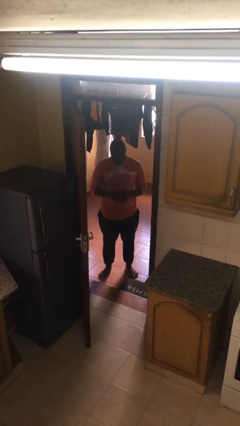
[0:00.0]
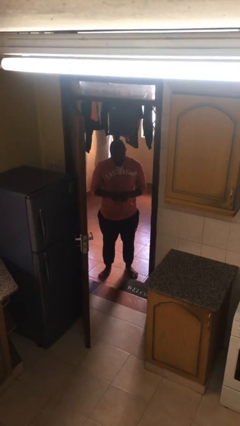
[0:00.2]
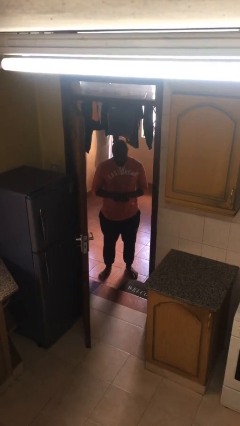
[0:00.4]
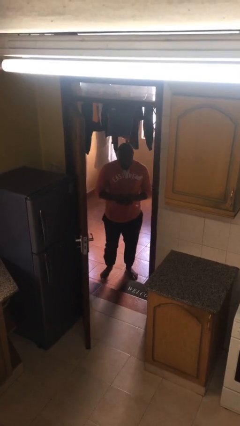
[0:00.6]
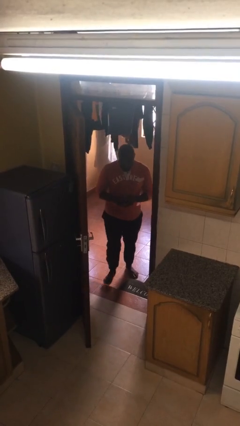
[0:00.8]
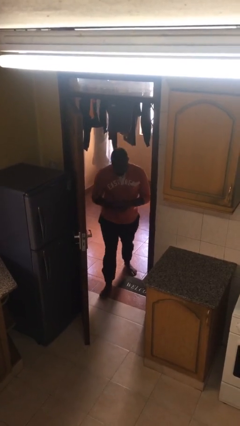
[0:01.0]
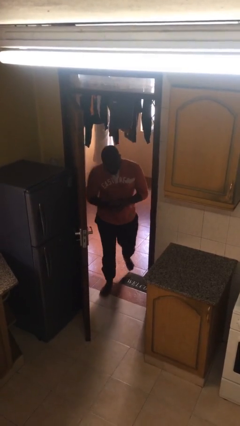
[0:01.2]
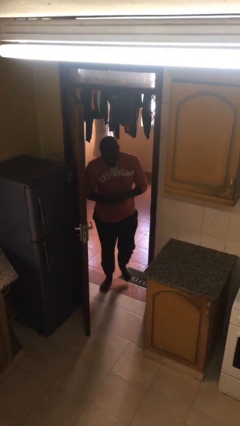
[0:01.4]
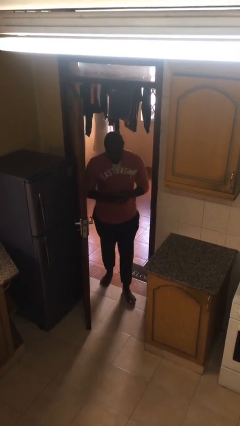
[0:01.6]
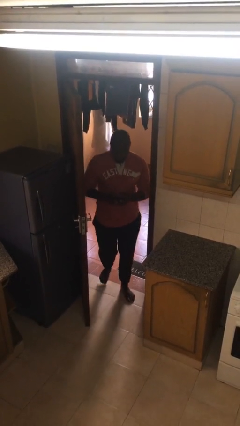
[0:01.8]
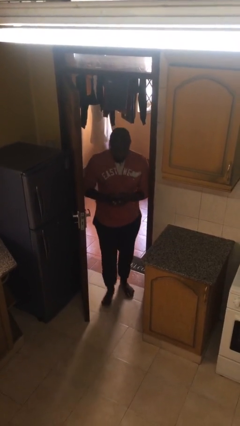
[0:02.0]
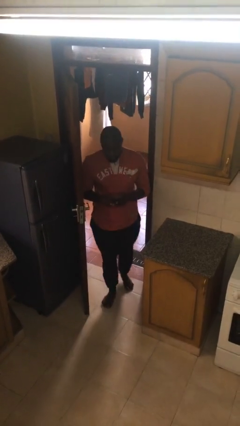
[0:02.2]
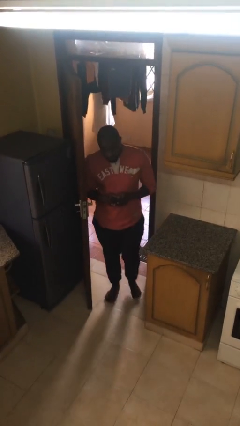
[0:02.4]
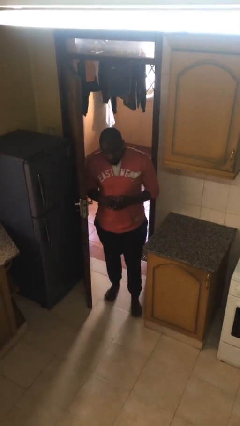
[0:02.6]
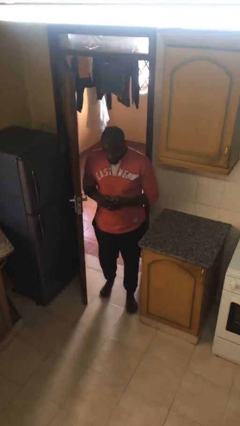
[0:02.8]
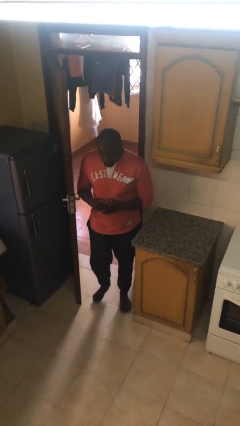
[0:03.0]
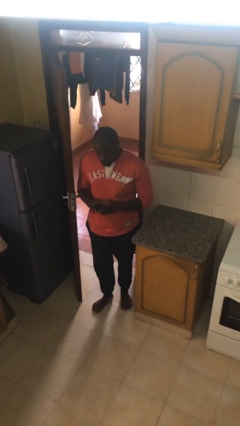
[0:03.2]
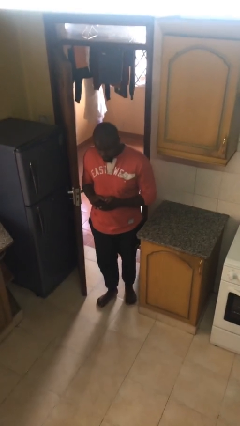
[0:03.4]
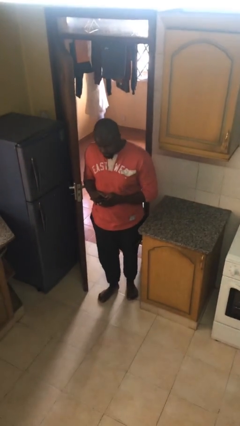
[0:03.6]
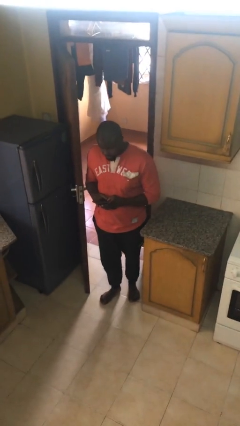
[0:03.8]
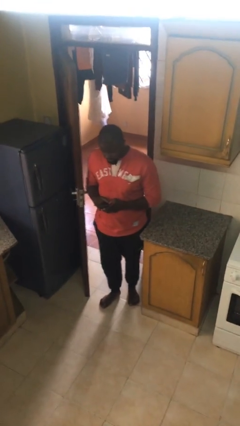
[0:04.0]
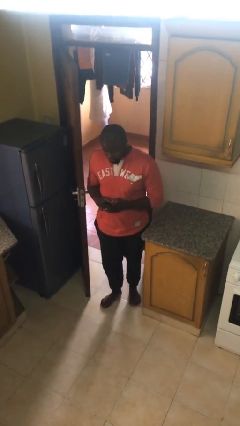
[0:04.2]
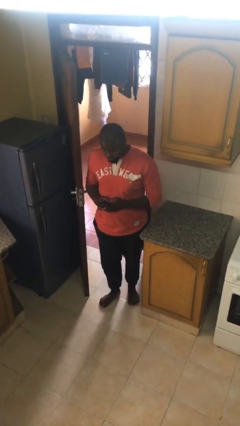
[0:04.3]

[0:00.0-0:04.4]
person enters scene through structure

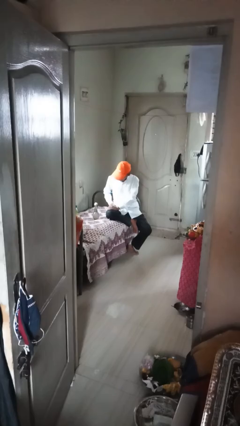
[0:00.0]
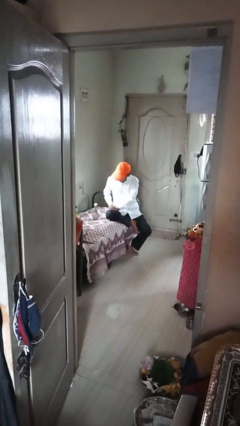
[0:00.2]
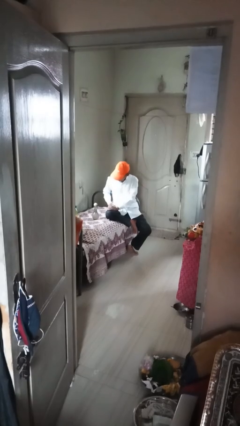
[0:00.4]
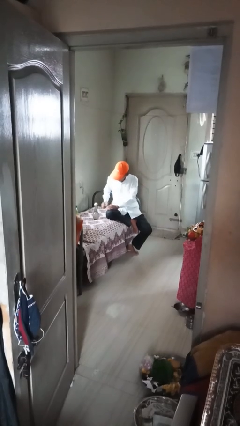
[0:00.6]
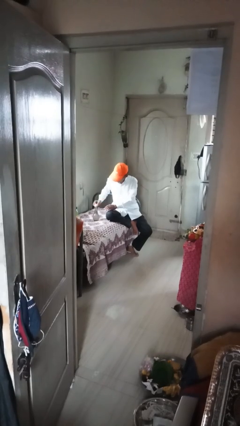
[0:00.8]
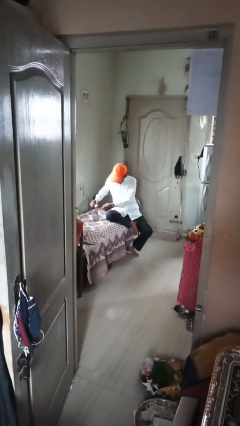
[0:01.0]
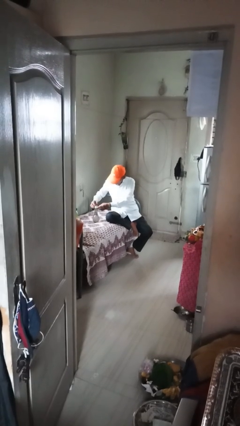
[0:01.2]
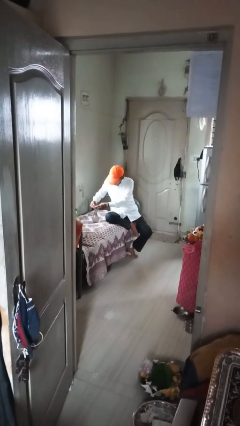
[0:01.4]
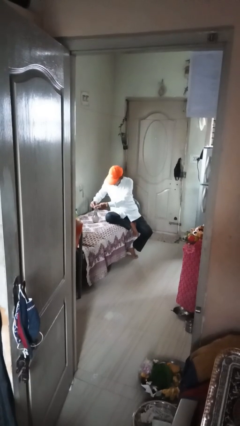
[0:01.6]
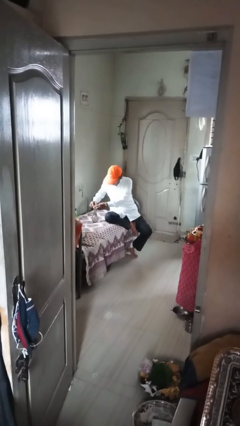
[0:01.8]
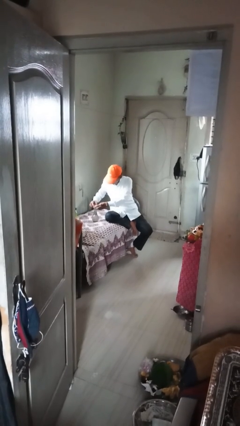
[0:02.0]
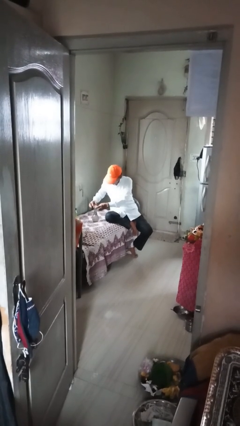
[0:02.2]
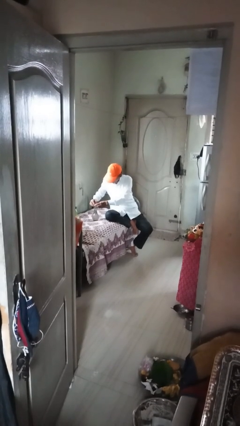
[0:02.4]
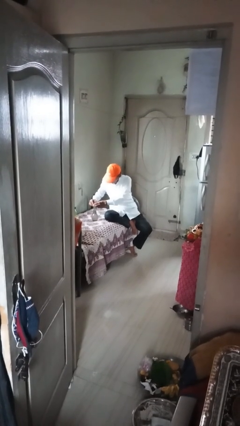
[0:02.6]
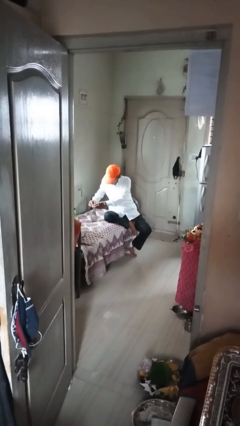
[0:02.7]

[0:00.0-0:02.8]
person arranges flowers in vase

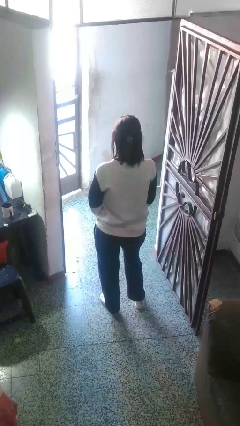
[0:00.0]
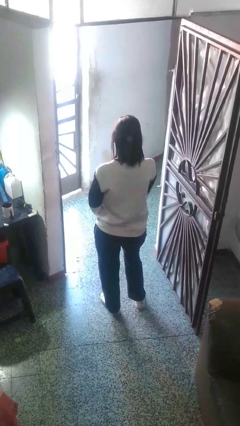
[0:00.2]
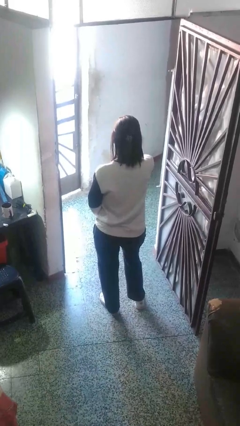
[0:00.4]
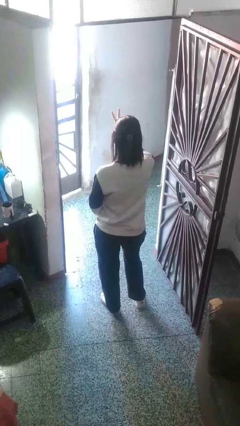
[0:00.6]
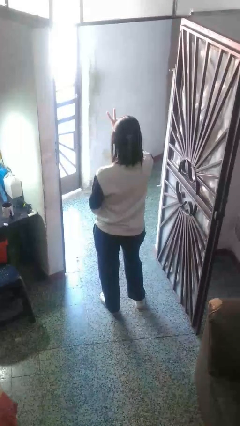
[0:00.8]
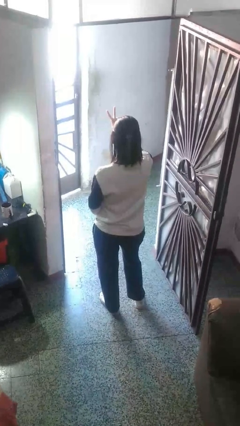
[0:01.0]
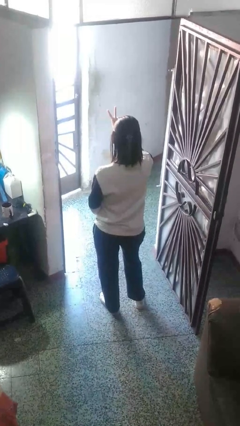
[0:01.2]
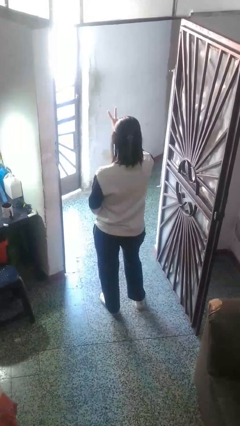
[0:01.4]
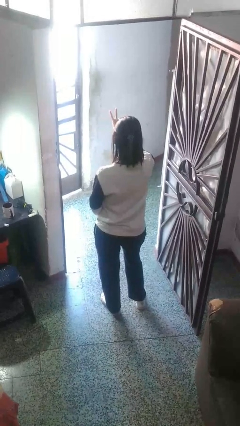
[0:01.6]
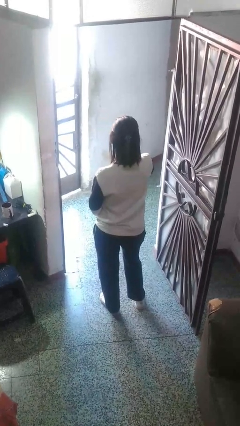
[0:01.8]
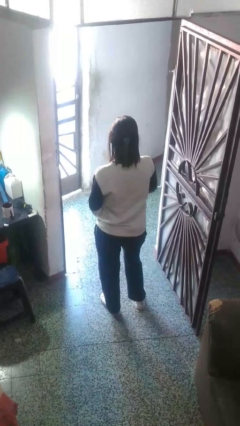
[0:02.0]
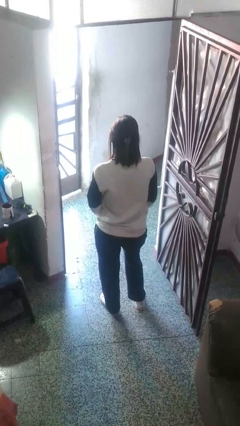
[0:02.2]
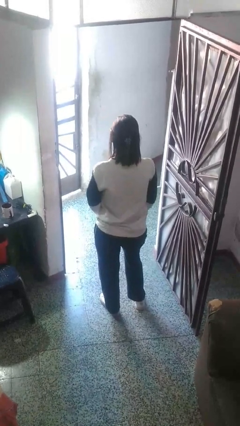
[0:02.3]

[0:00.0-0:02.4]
person gestures peace

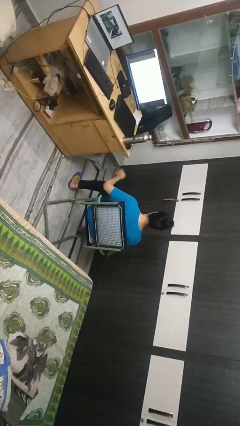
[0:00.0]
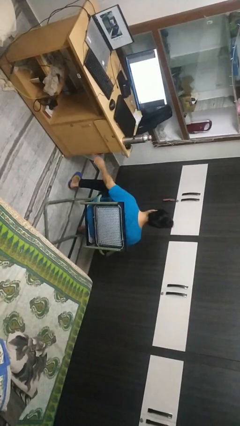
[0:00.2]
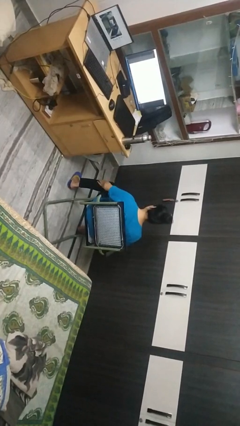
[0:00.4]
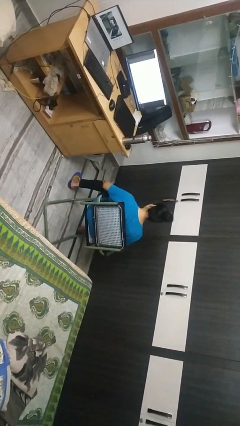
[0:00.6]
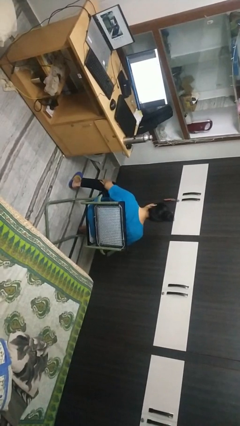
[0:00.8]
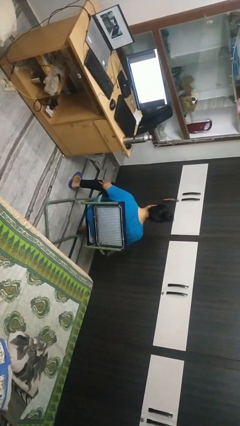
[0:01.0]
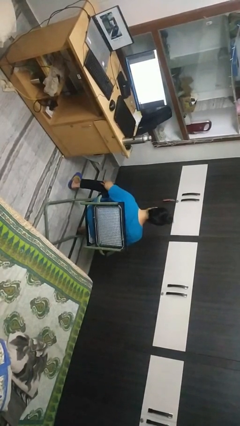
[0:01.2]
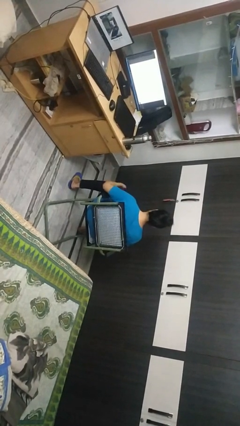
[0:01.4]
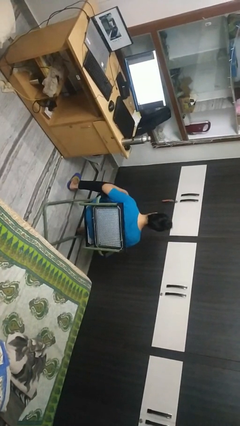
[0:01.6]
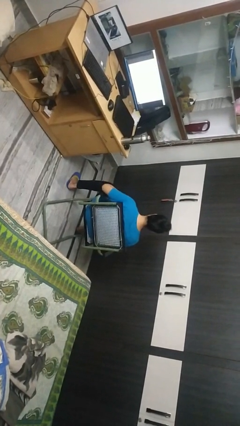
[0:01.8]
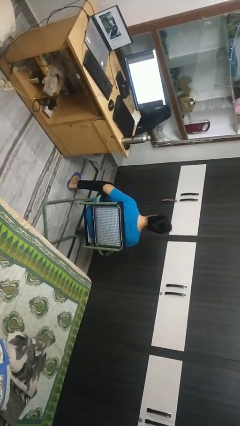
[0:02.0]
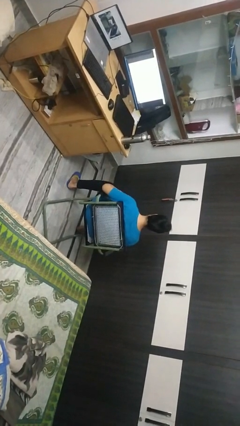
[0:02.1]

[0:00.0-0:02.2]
person swats bug

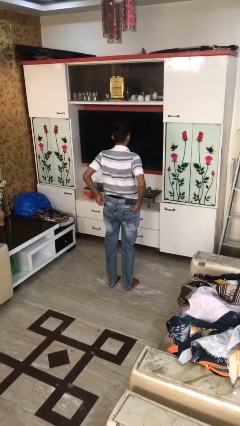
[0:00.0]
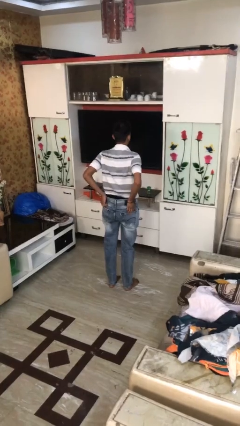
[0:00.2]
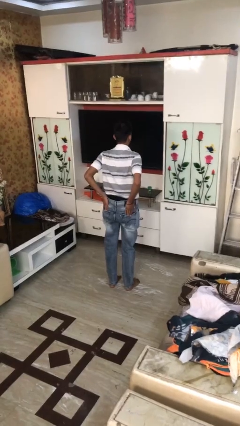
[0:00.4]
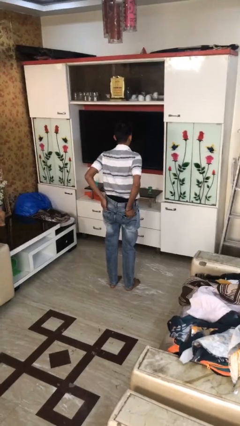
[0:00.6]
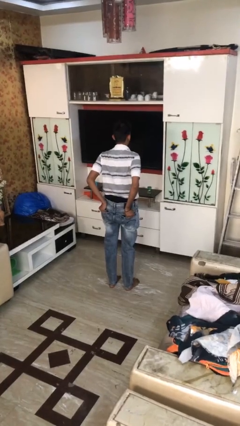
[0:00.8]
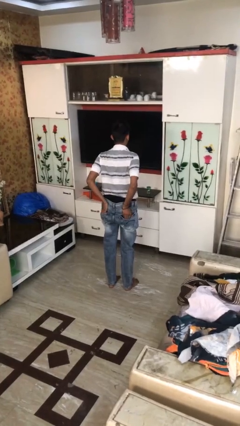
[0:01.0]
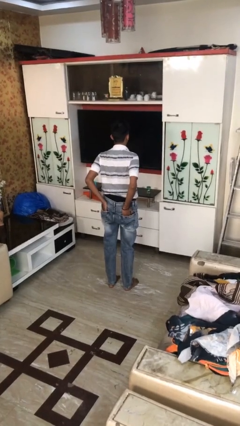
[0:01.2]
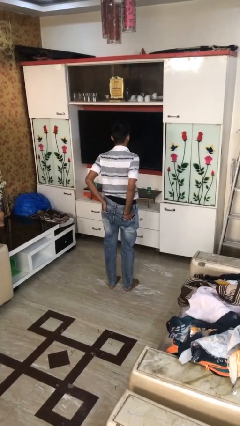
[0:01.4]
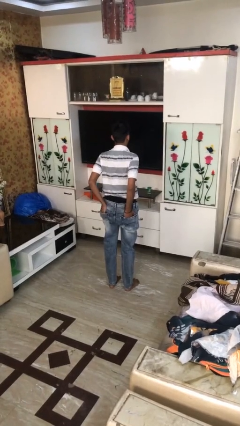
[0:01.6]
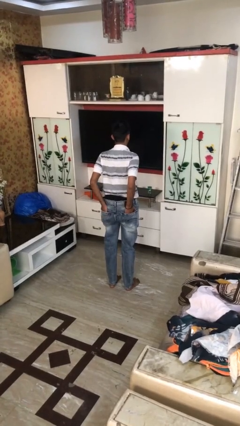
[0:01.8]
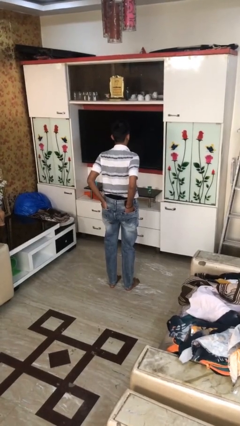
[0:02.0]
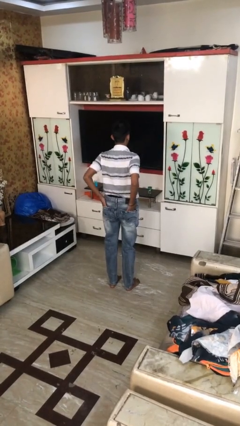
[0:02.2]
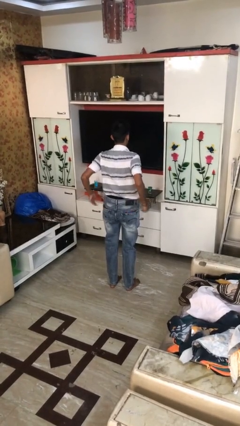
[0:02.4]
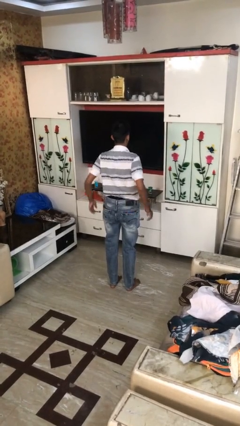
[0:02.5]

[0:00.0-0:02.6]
person puts hands in back pockets

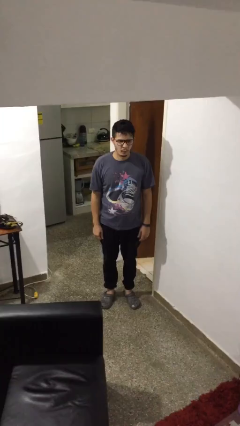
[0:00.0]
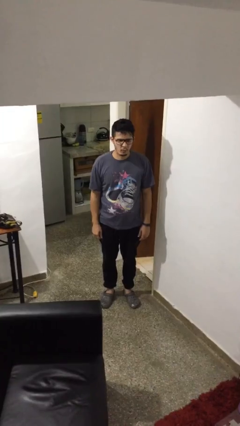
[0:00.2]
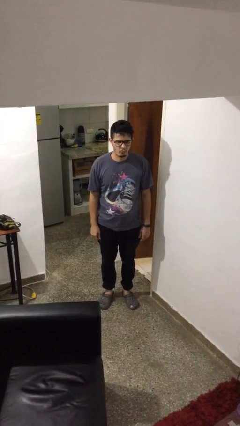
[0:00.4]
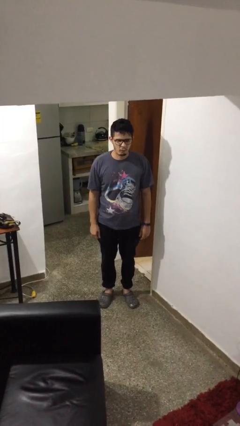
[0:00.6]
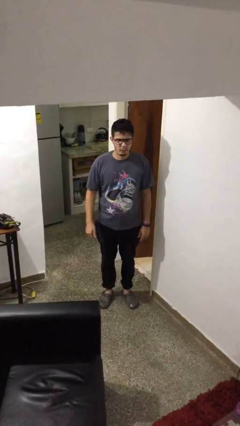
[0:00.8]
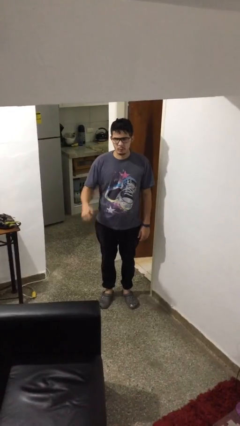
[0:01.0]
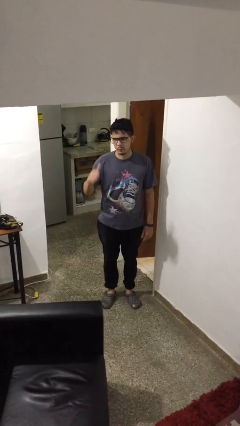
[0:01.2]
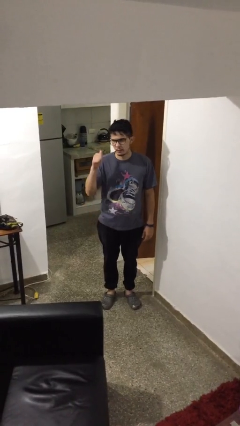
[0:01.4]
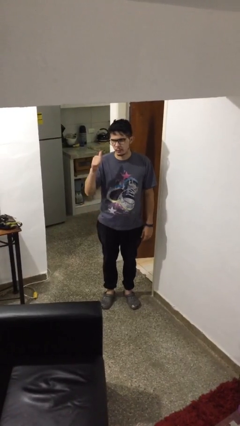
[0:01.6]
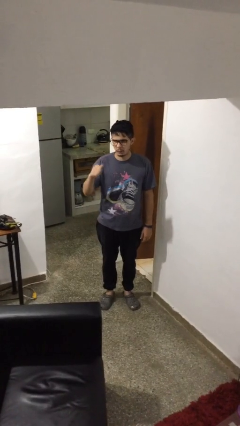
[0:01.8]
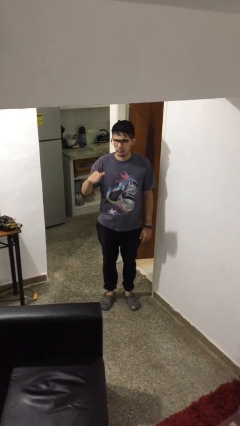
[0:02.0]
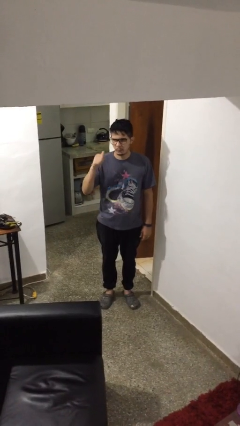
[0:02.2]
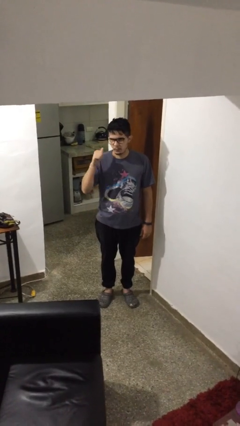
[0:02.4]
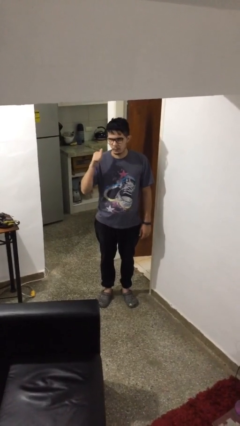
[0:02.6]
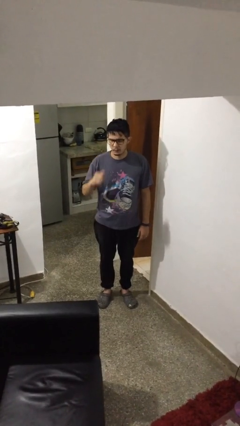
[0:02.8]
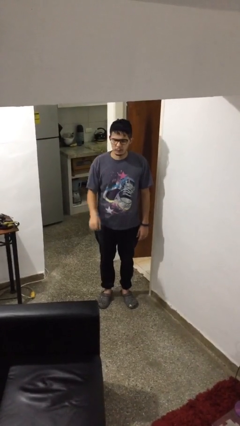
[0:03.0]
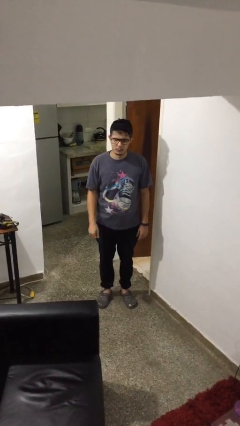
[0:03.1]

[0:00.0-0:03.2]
person gestures behind me
